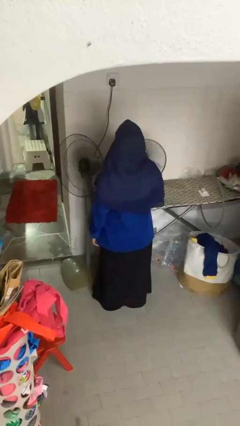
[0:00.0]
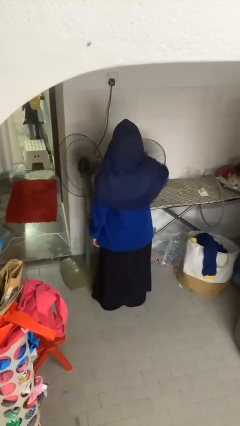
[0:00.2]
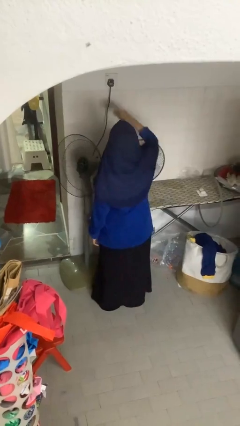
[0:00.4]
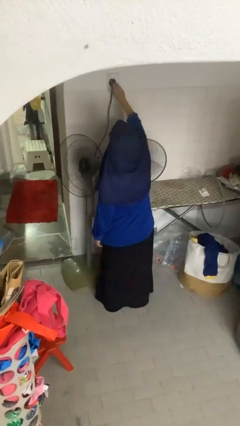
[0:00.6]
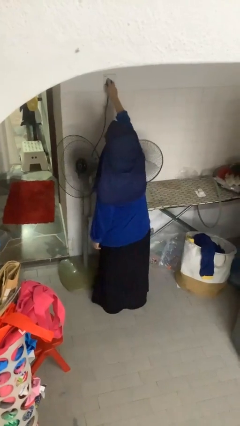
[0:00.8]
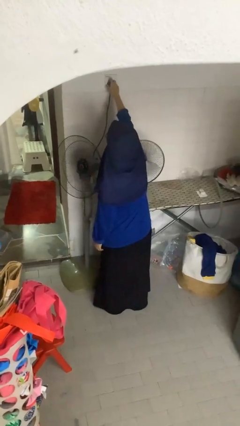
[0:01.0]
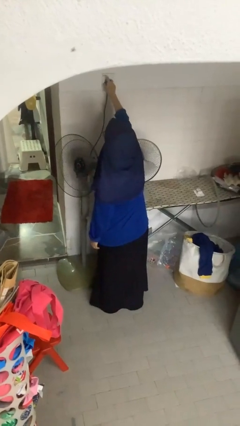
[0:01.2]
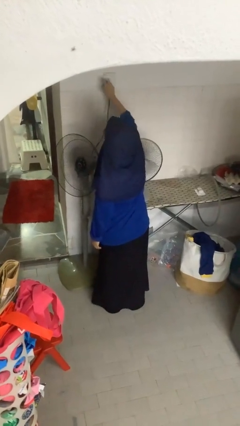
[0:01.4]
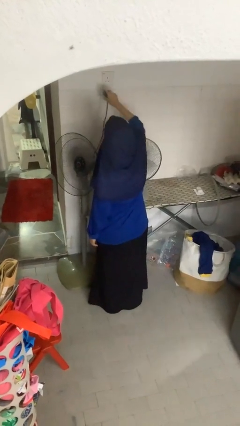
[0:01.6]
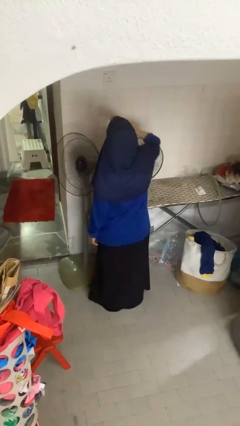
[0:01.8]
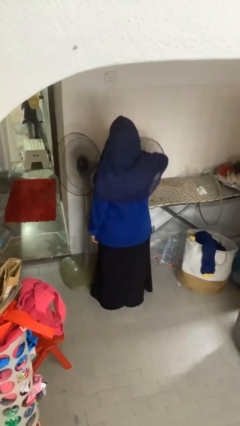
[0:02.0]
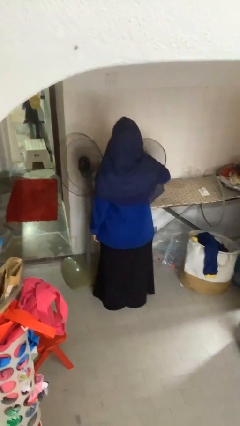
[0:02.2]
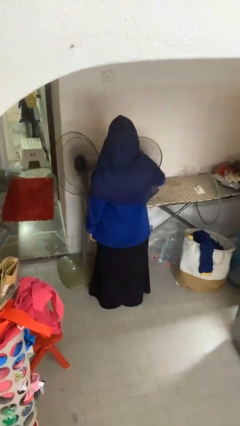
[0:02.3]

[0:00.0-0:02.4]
person unplugs from electrical socket

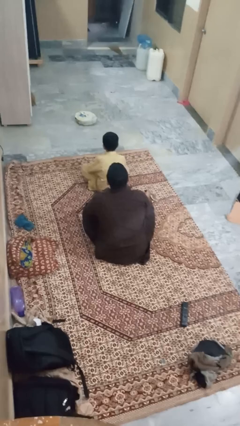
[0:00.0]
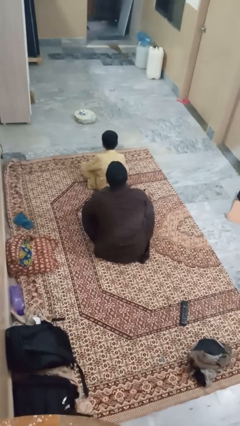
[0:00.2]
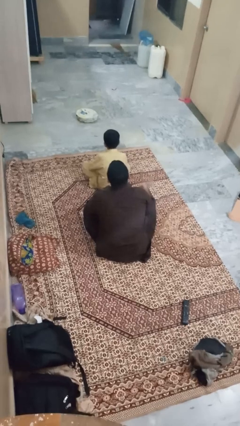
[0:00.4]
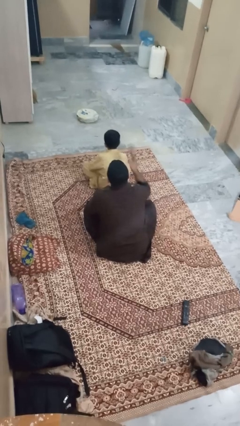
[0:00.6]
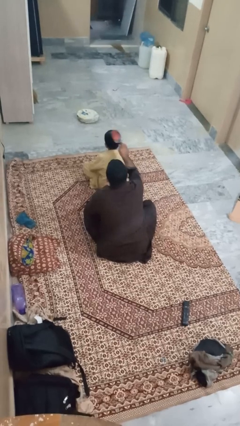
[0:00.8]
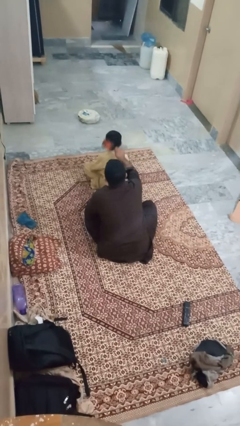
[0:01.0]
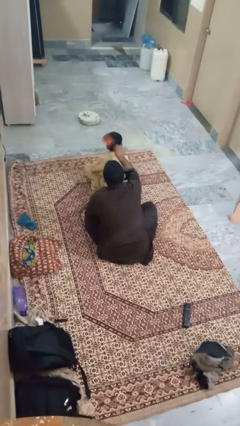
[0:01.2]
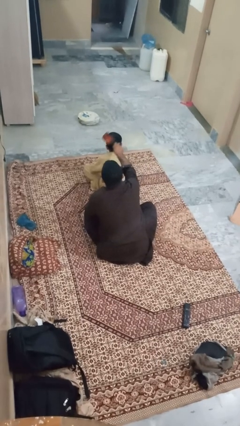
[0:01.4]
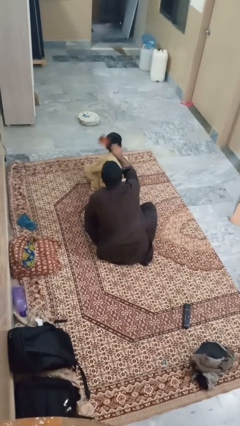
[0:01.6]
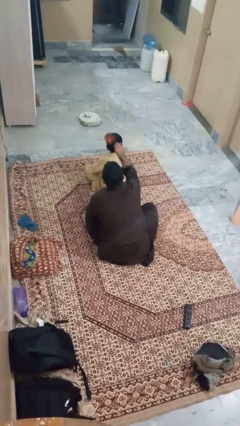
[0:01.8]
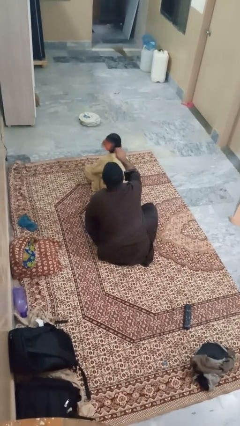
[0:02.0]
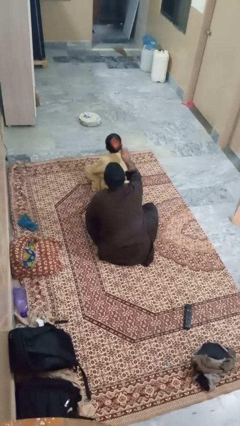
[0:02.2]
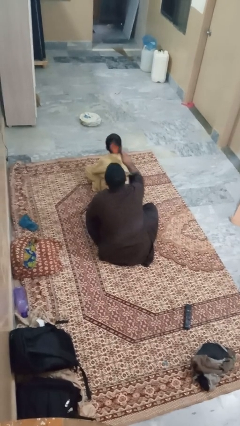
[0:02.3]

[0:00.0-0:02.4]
person brushes hair of person

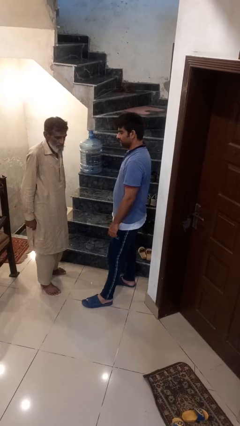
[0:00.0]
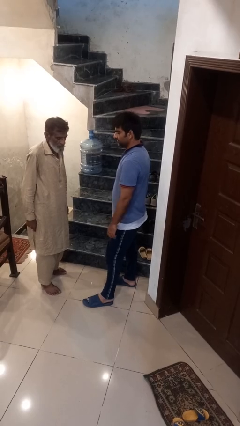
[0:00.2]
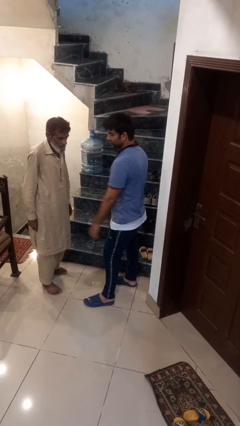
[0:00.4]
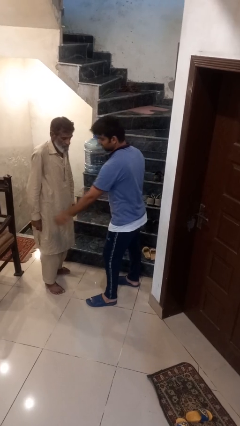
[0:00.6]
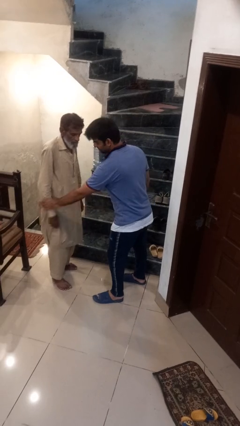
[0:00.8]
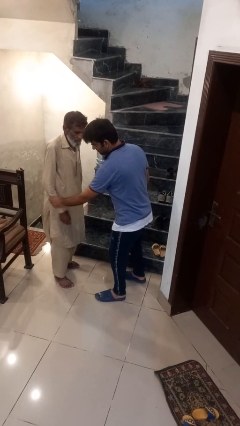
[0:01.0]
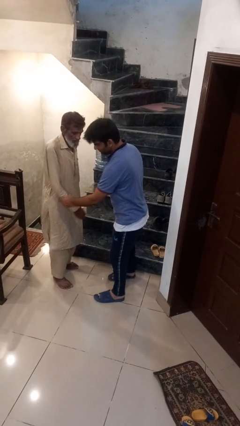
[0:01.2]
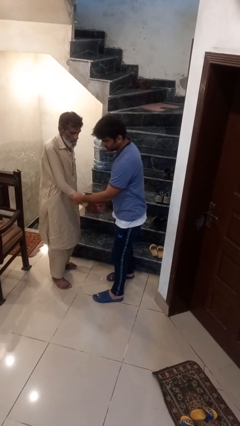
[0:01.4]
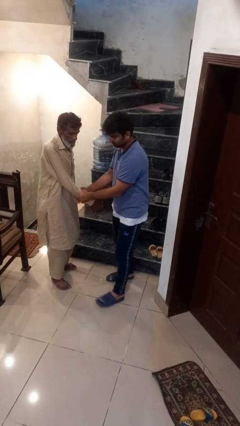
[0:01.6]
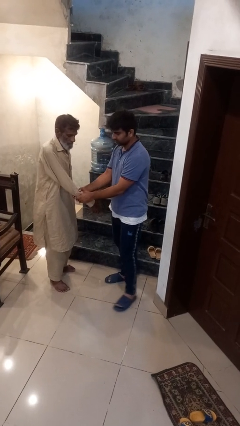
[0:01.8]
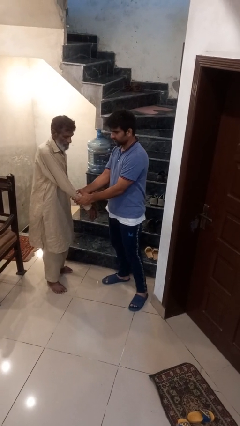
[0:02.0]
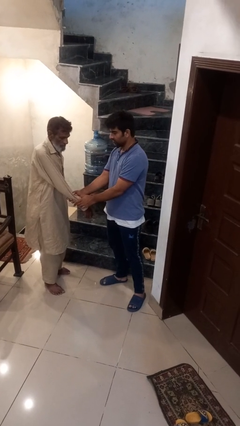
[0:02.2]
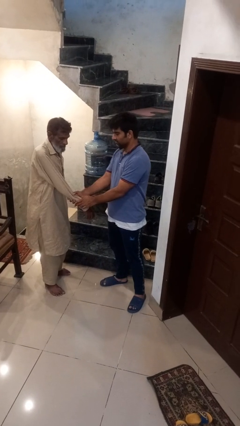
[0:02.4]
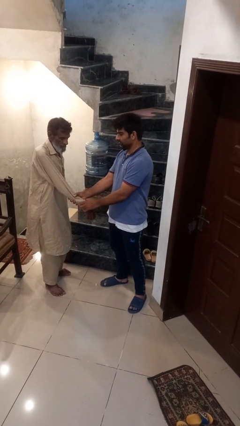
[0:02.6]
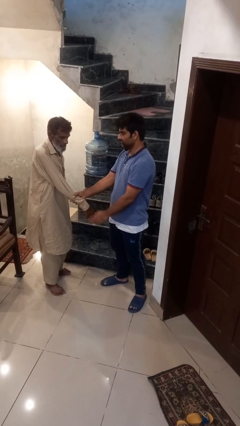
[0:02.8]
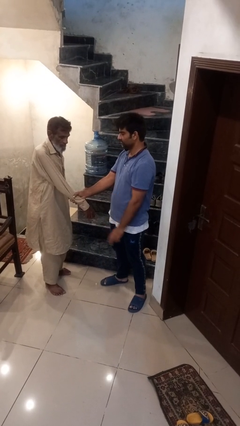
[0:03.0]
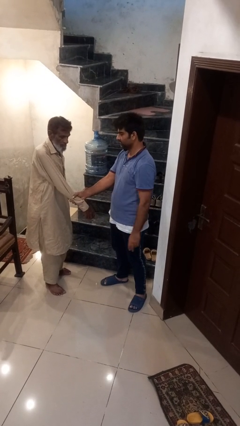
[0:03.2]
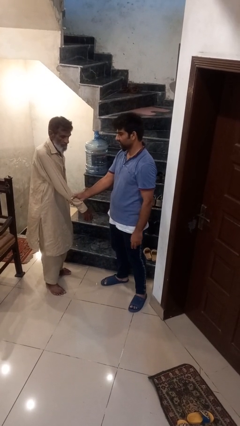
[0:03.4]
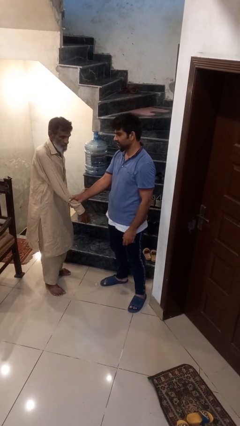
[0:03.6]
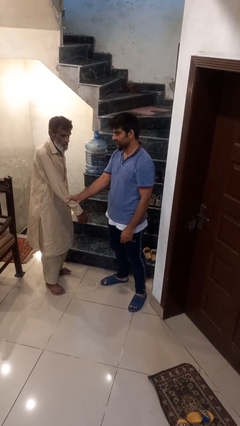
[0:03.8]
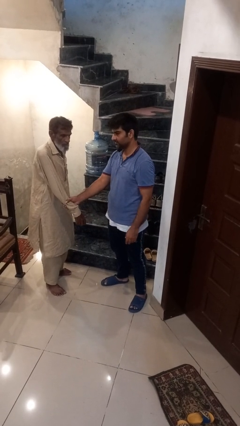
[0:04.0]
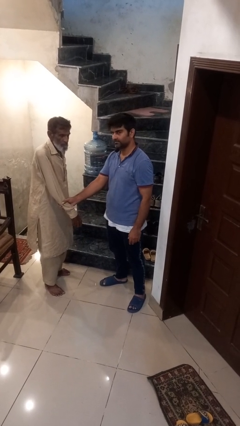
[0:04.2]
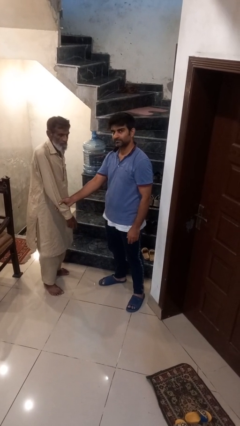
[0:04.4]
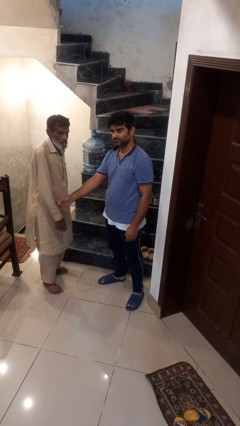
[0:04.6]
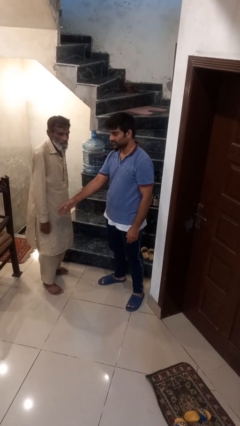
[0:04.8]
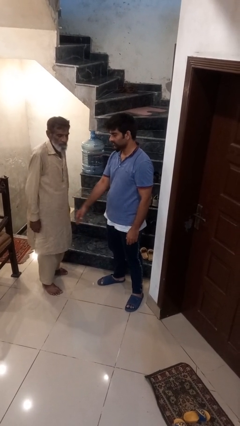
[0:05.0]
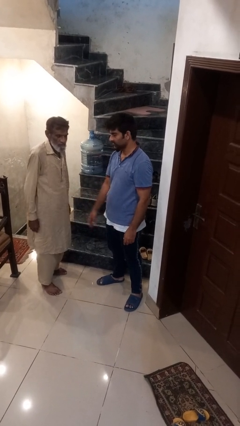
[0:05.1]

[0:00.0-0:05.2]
person grabs person by forearm

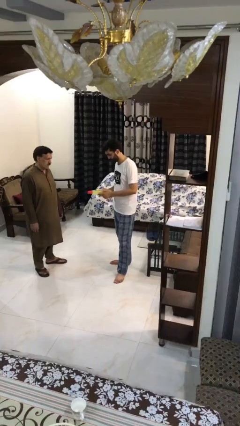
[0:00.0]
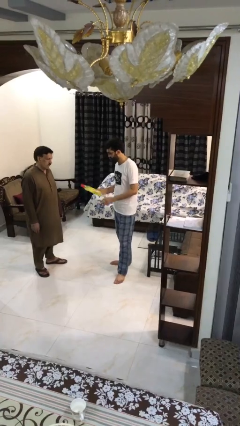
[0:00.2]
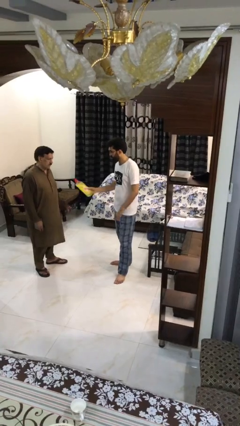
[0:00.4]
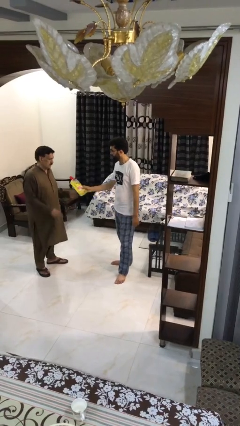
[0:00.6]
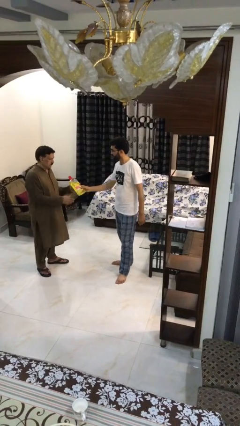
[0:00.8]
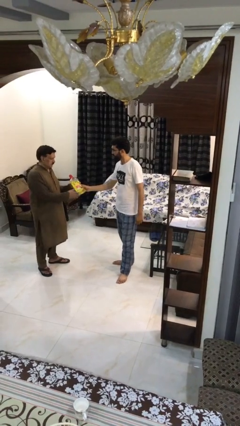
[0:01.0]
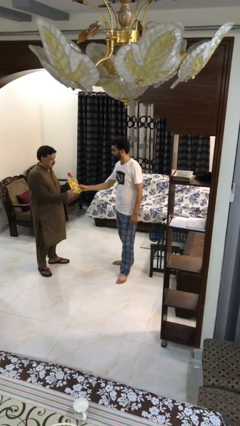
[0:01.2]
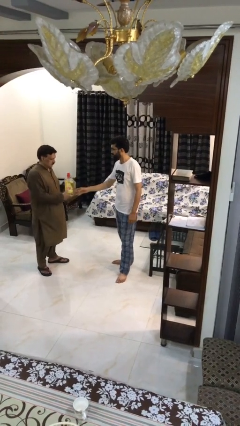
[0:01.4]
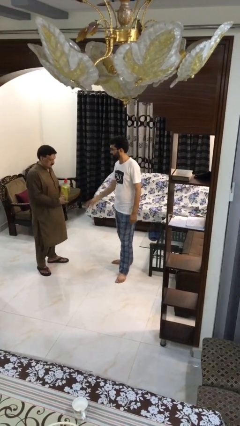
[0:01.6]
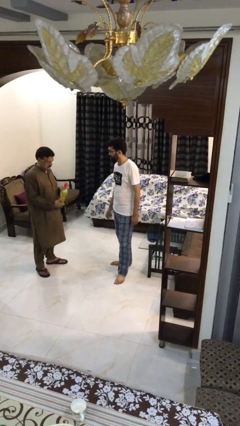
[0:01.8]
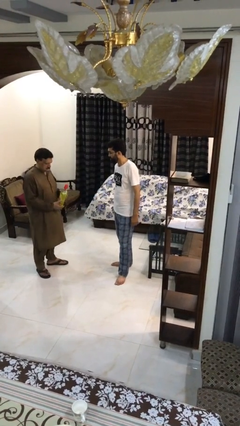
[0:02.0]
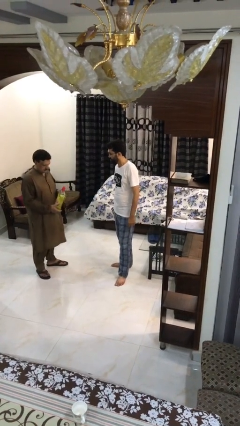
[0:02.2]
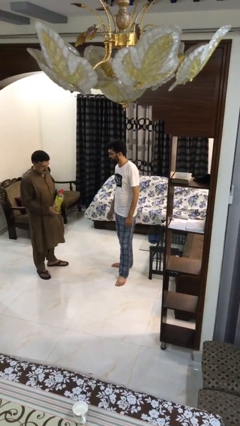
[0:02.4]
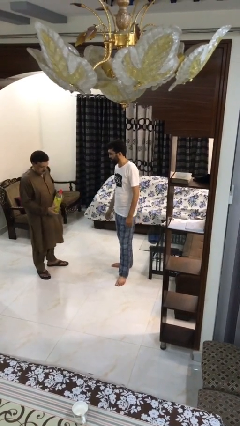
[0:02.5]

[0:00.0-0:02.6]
person transfers object to person

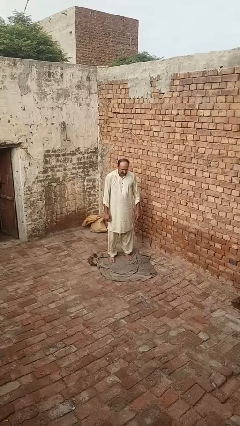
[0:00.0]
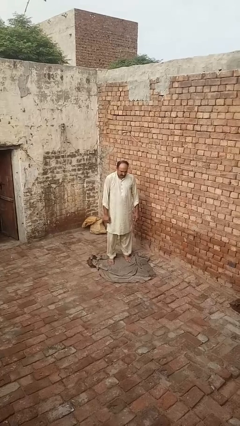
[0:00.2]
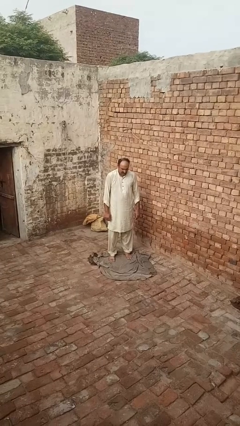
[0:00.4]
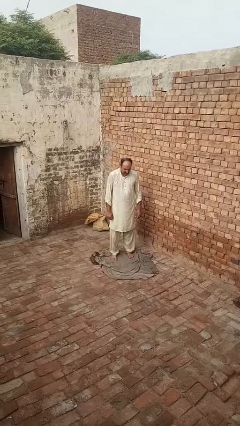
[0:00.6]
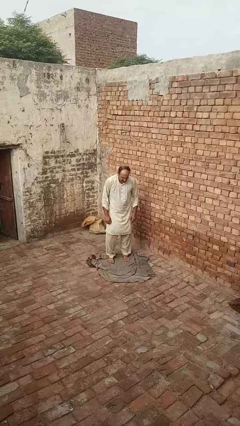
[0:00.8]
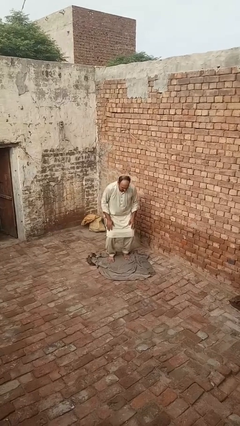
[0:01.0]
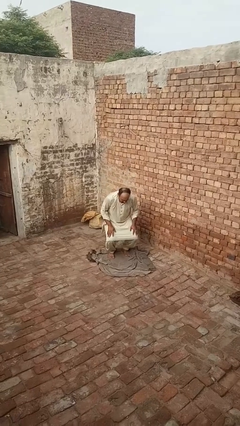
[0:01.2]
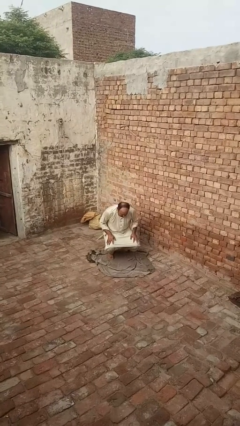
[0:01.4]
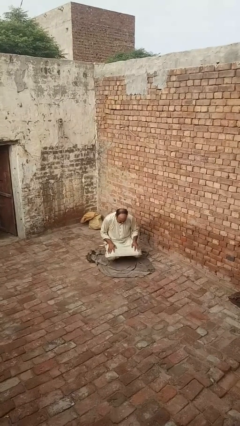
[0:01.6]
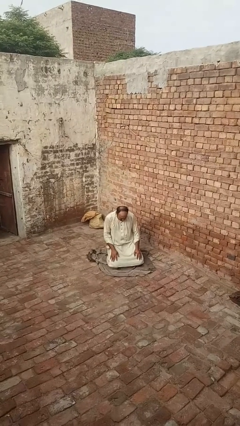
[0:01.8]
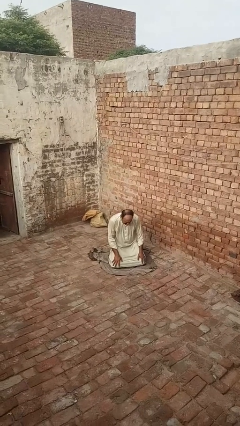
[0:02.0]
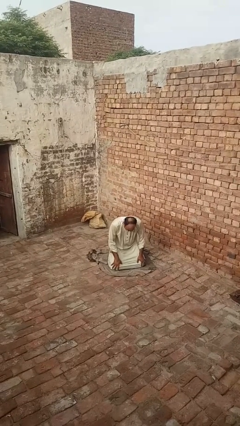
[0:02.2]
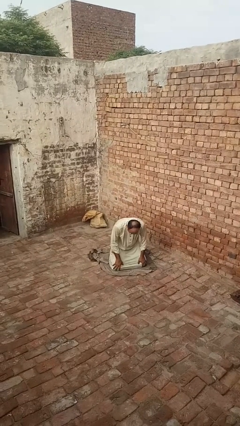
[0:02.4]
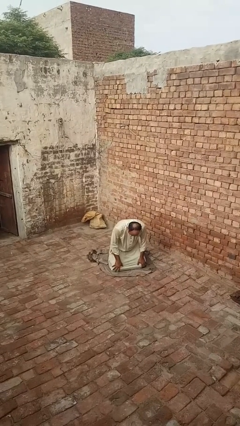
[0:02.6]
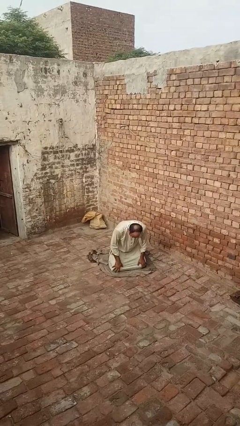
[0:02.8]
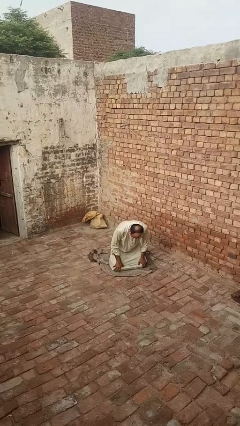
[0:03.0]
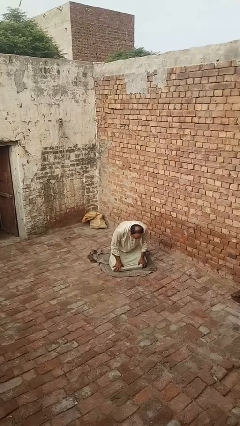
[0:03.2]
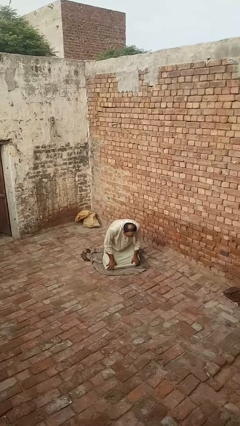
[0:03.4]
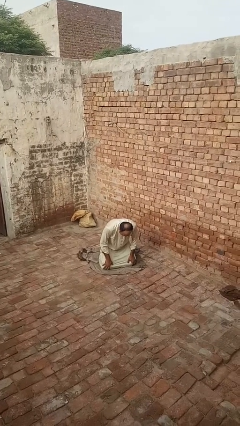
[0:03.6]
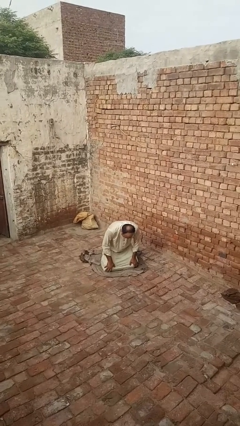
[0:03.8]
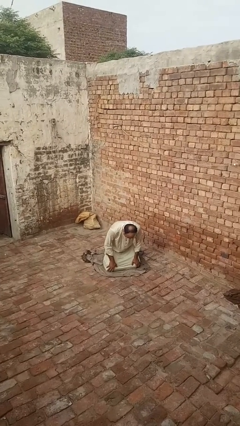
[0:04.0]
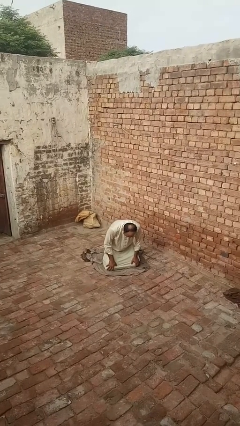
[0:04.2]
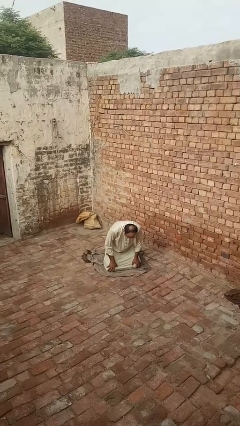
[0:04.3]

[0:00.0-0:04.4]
person kneels

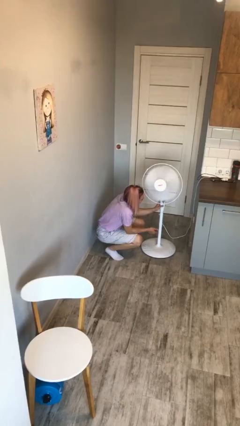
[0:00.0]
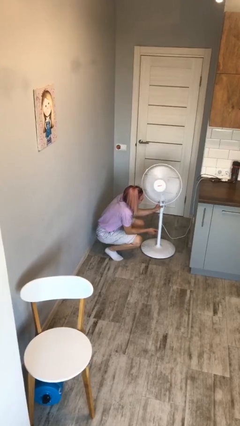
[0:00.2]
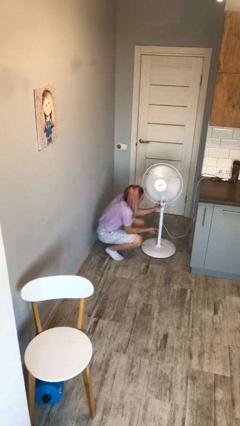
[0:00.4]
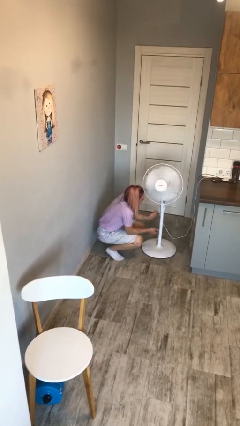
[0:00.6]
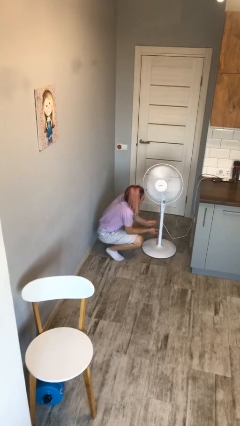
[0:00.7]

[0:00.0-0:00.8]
person turns off fan
